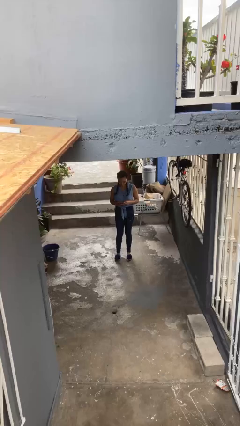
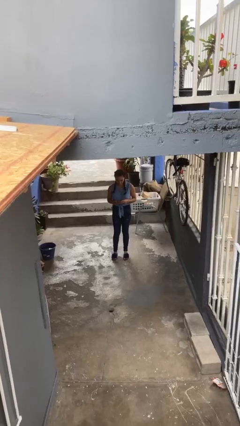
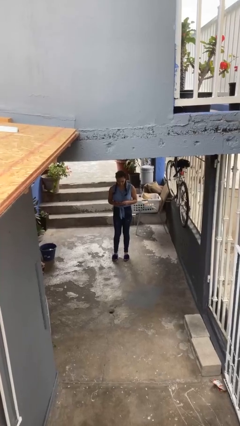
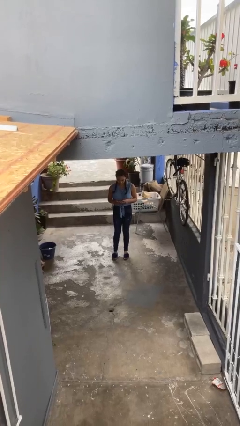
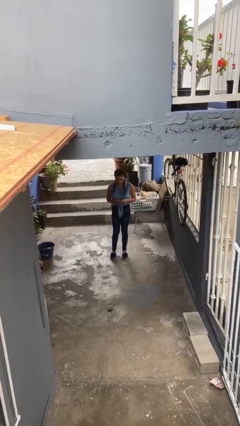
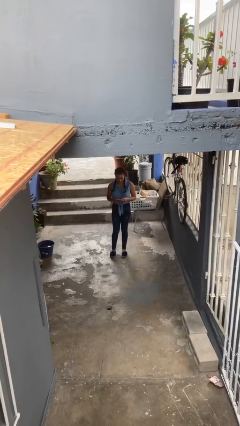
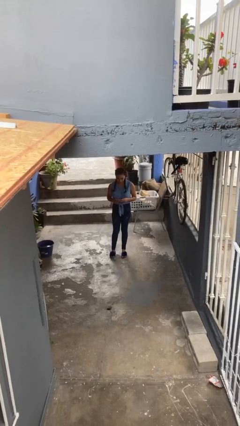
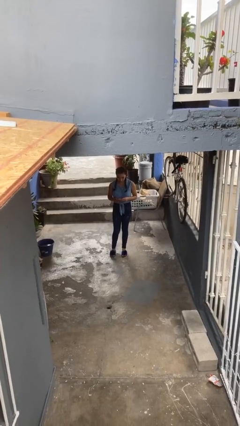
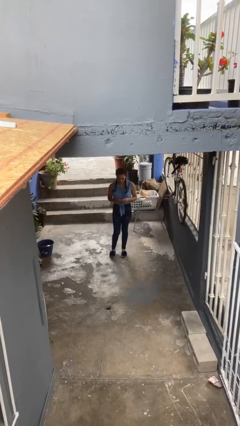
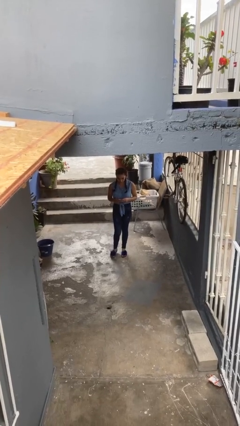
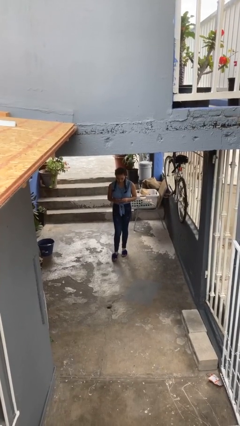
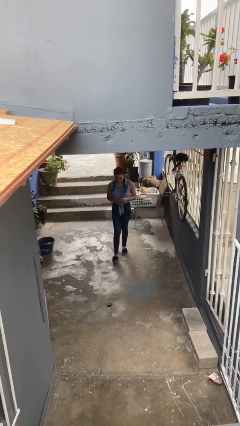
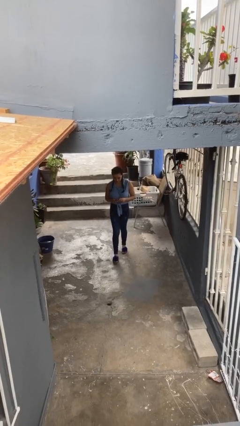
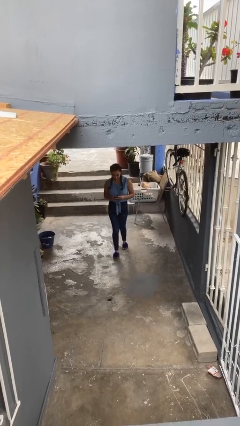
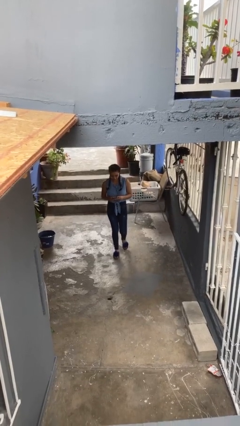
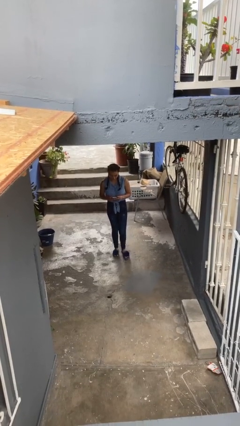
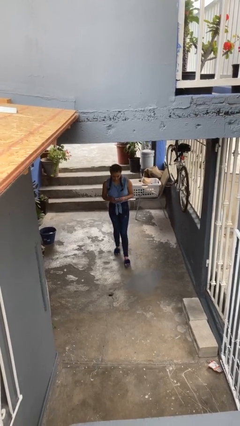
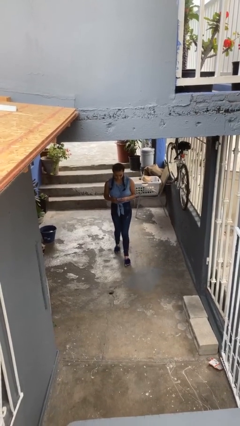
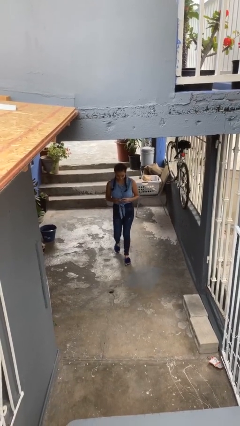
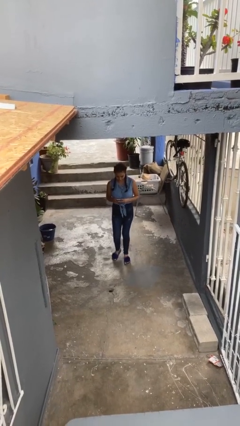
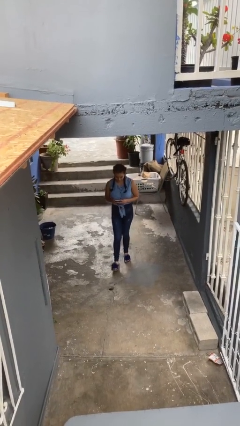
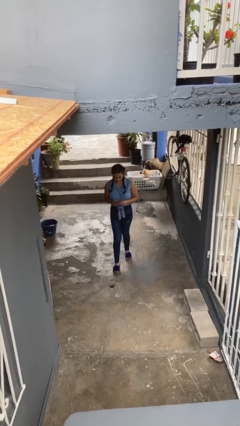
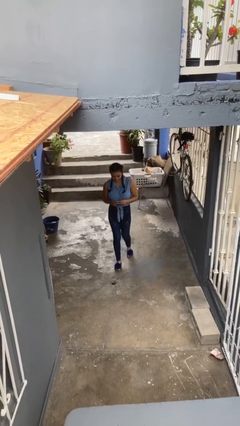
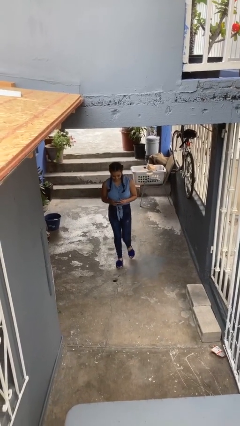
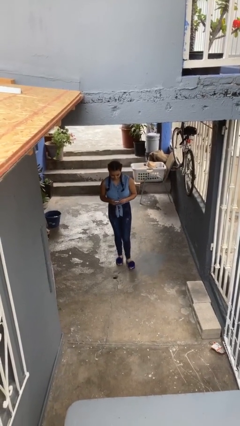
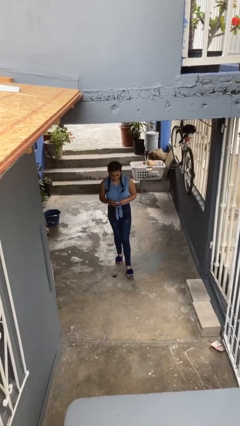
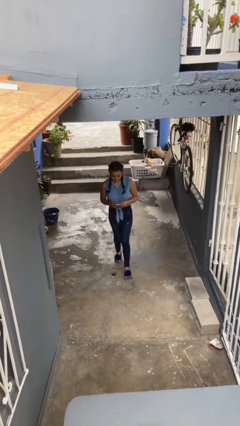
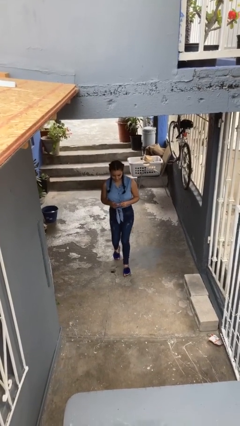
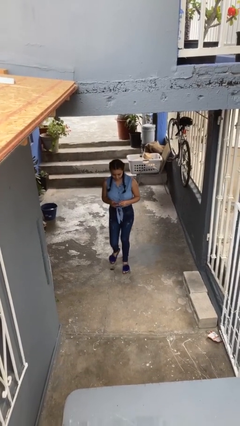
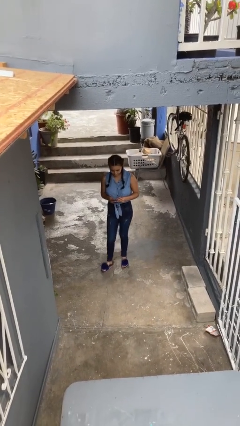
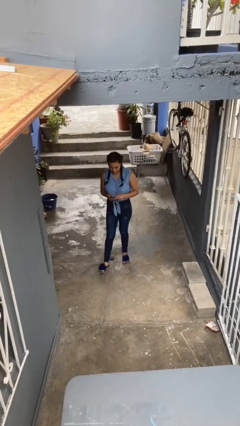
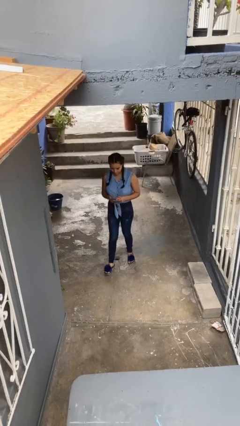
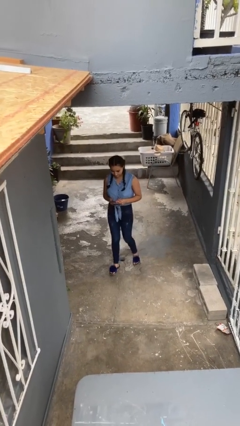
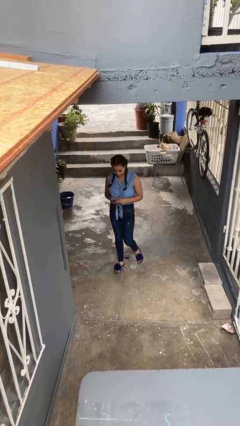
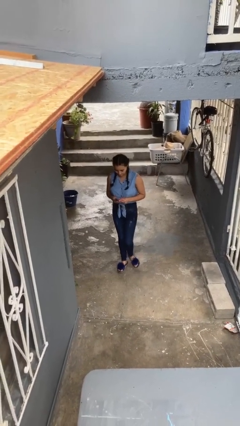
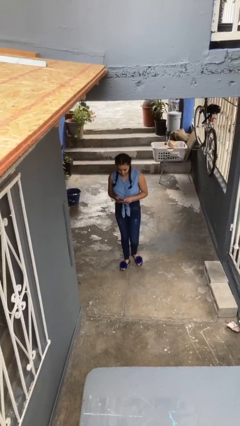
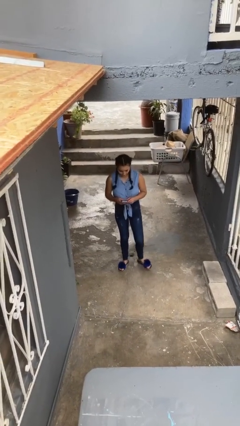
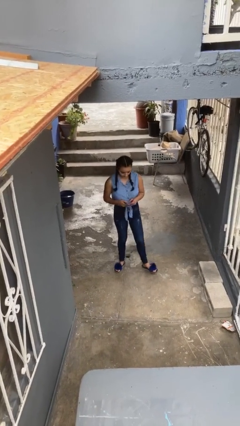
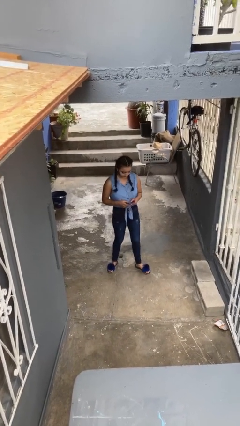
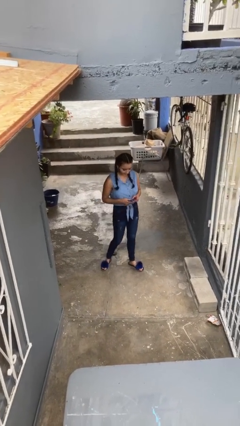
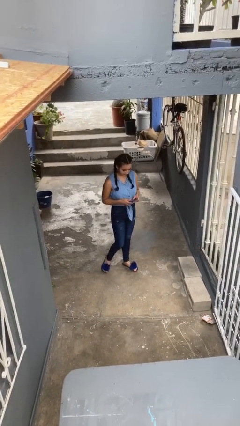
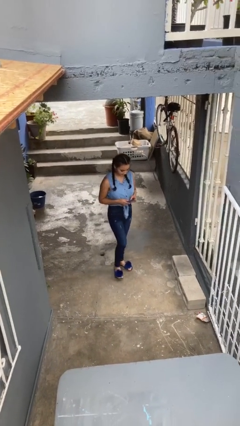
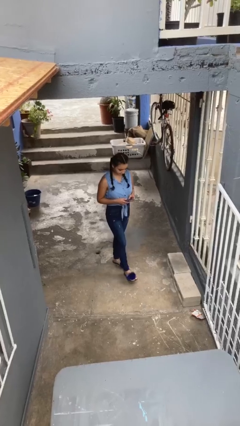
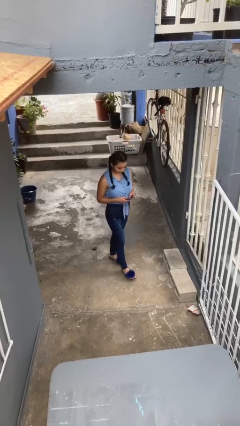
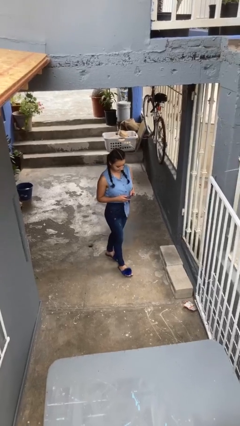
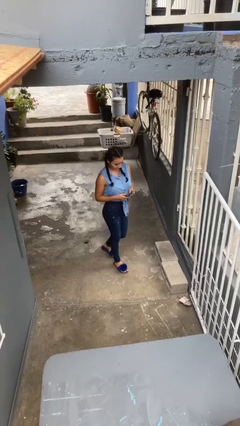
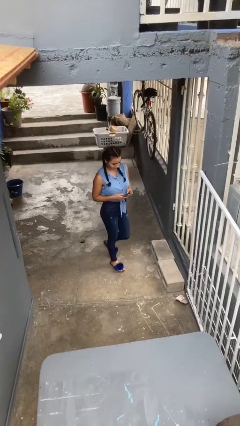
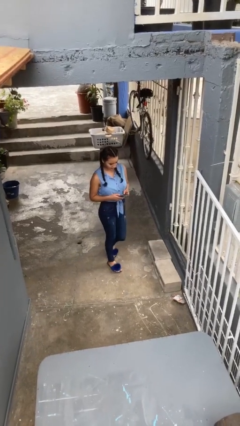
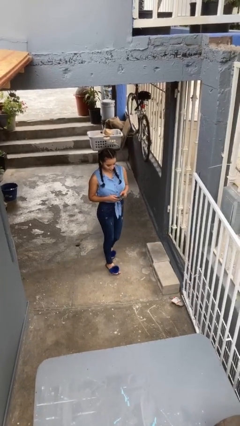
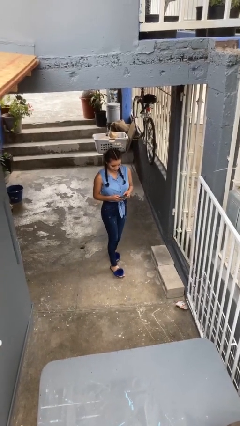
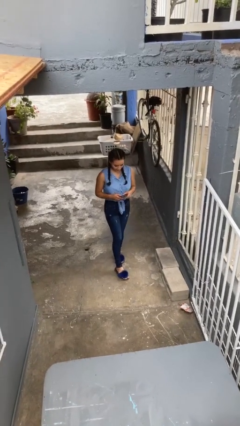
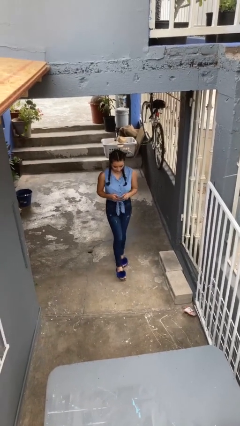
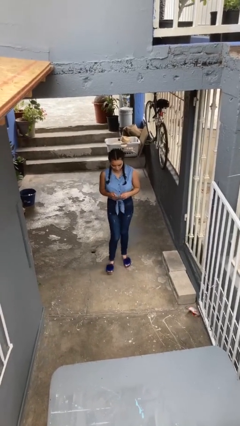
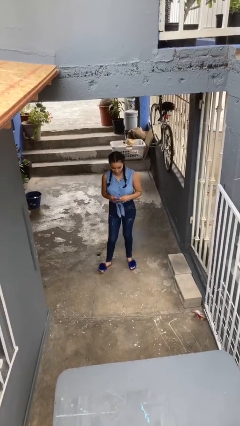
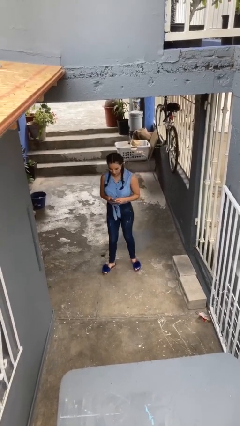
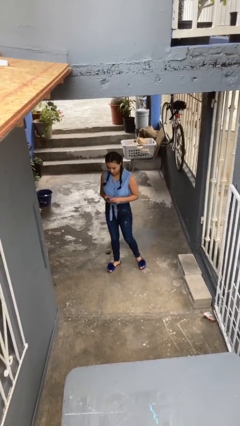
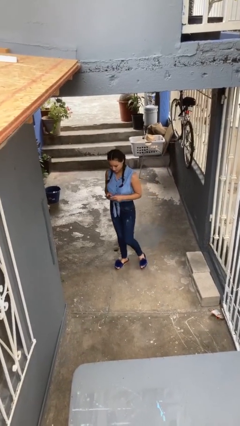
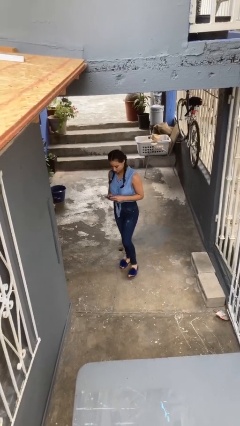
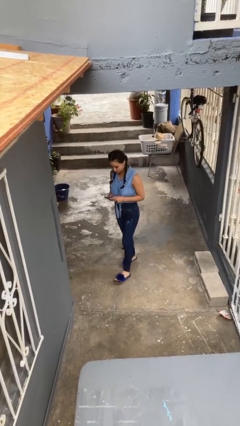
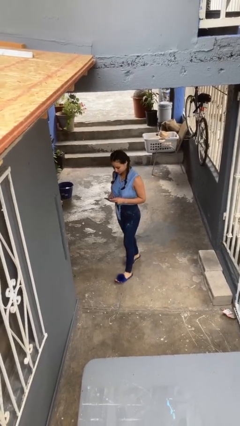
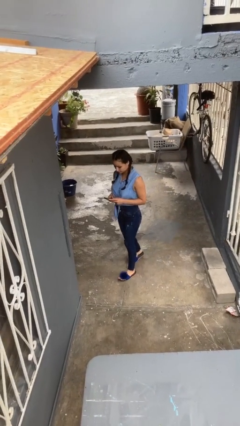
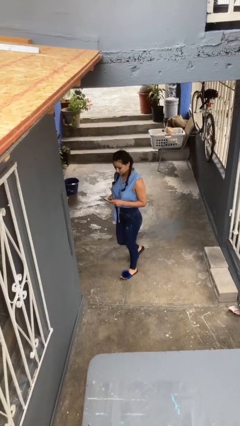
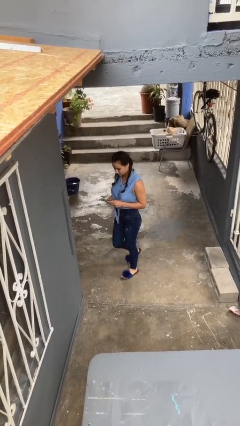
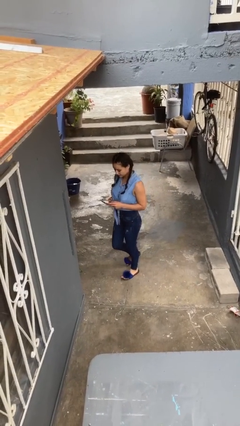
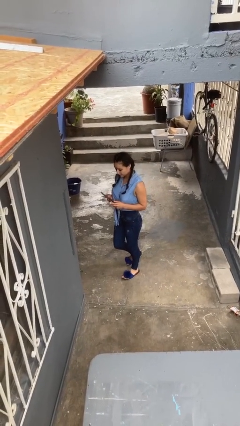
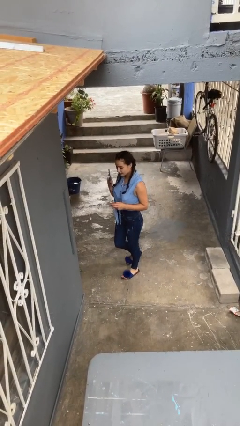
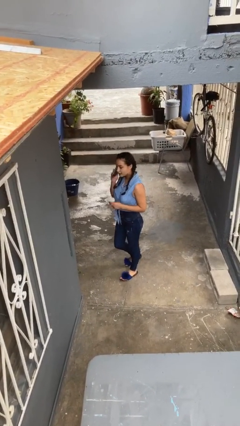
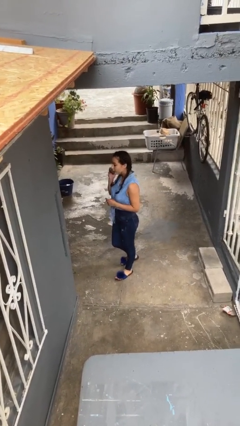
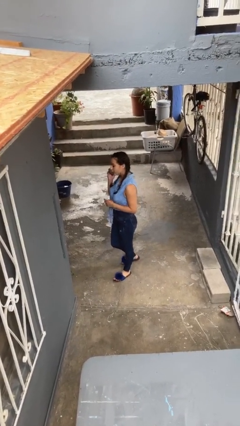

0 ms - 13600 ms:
person texts on phone

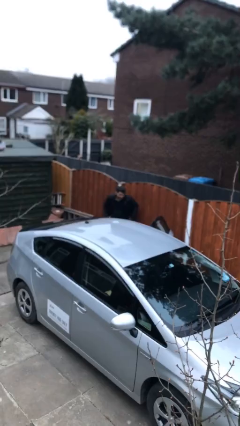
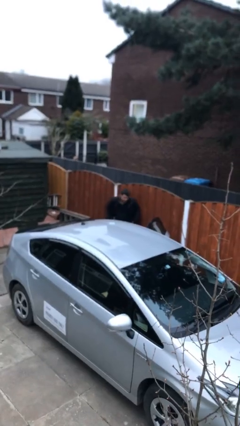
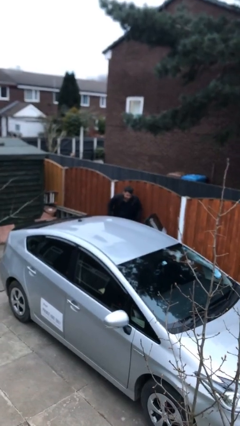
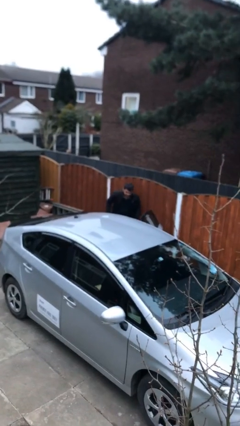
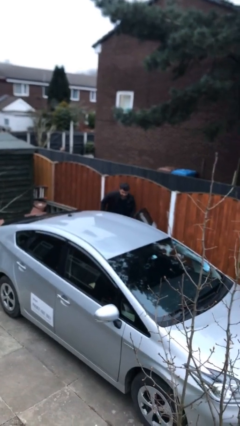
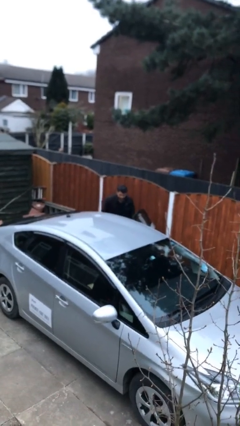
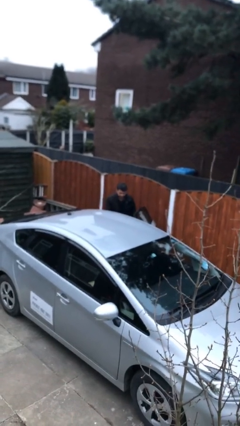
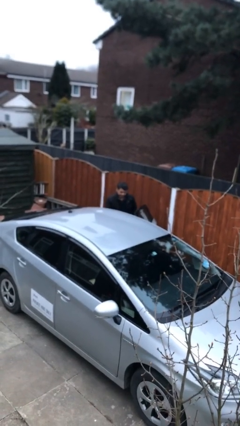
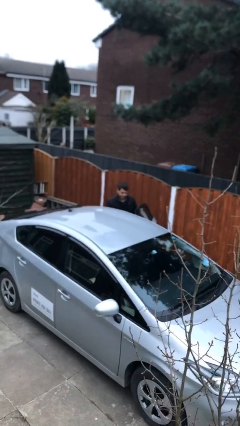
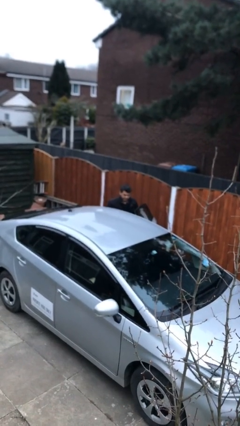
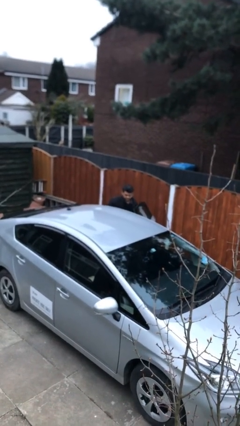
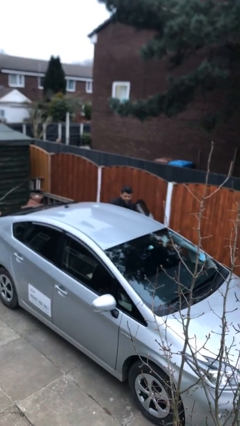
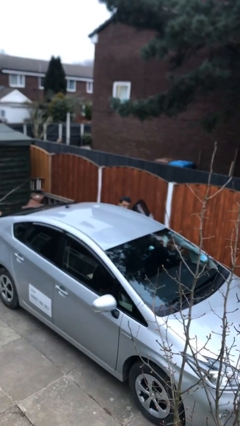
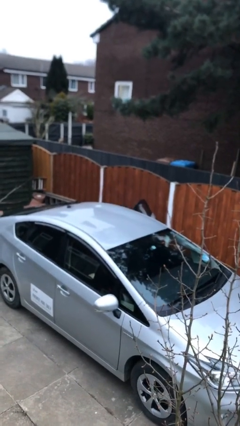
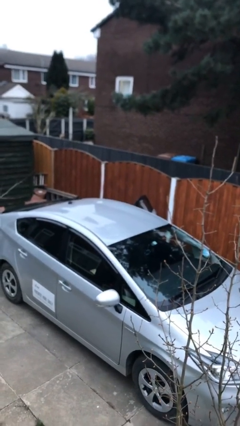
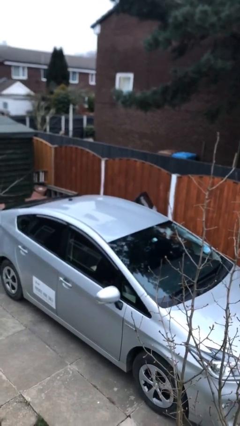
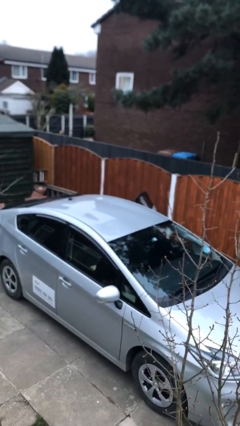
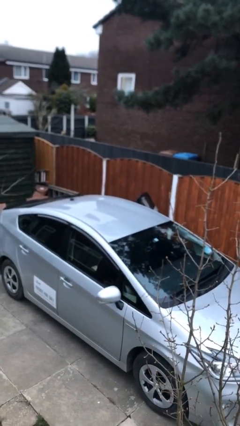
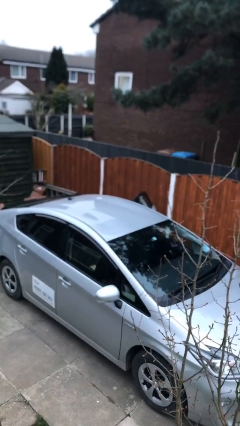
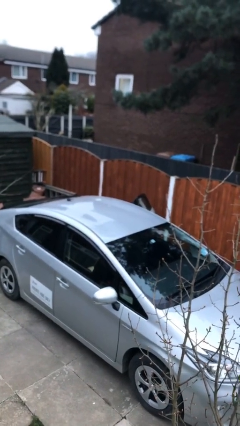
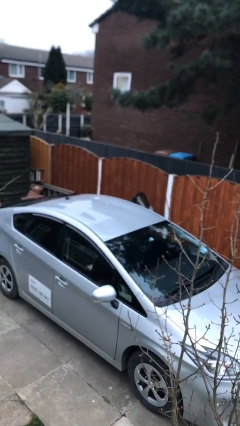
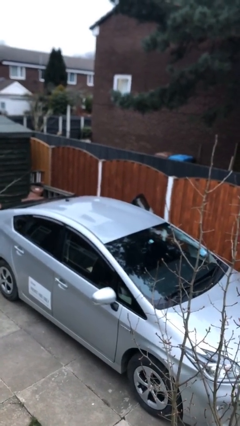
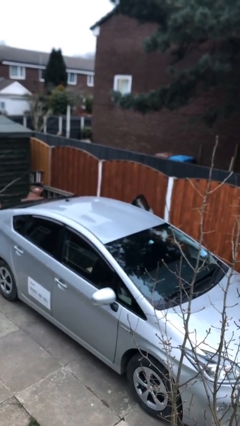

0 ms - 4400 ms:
person enters car

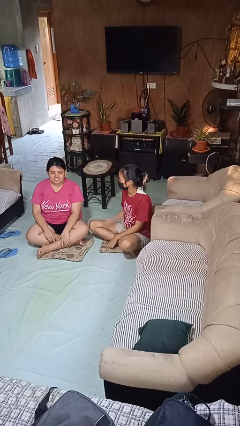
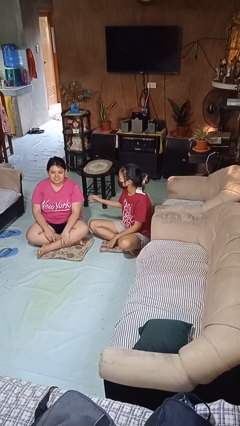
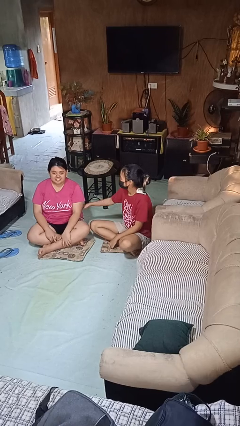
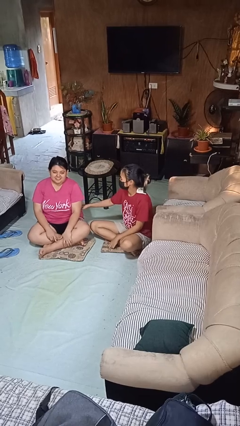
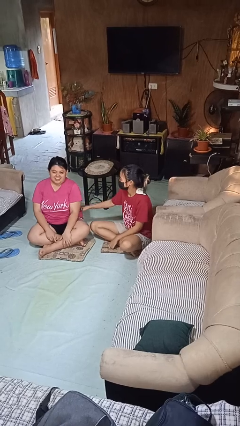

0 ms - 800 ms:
person tickles person
